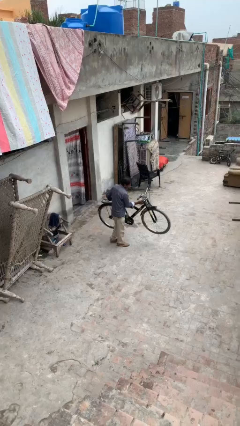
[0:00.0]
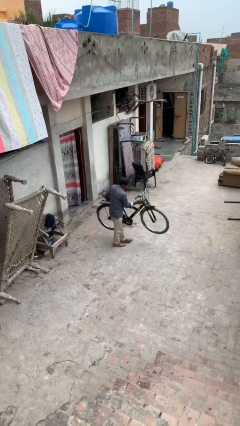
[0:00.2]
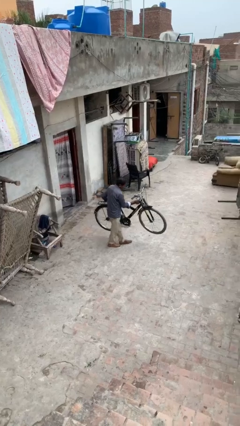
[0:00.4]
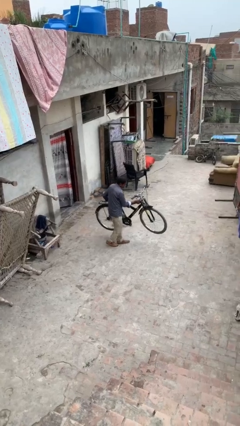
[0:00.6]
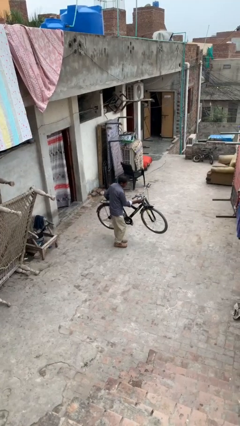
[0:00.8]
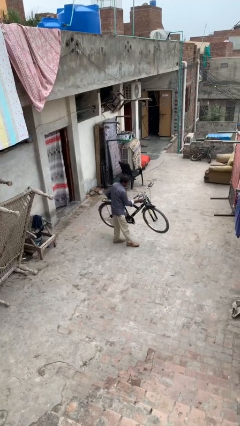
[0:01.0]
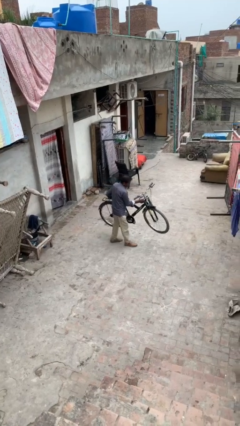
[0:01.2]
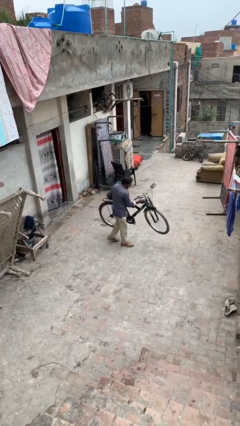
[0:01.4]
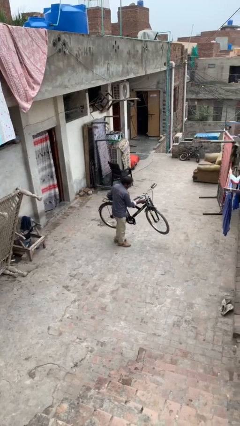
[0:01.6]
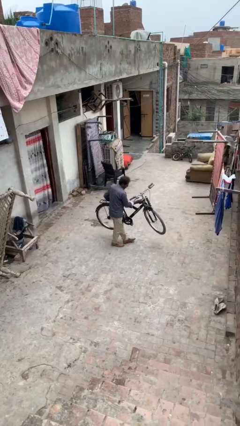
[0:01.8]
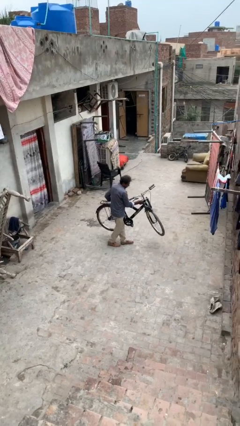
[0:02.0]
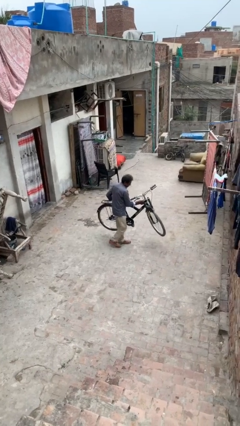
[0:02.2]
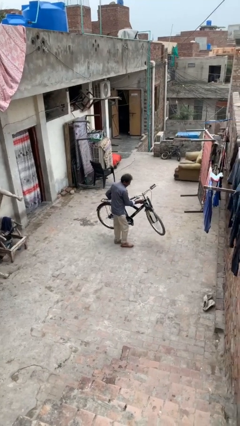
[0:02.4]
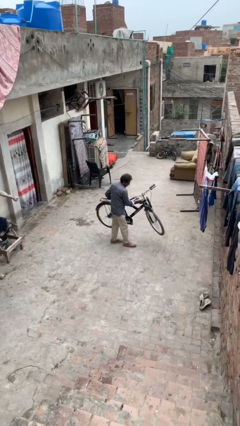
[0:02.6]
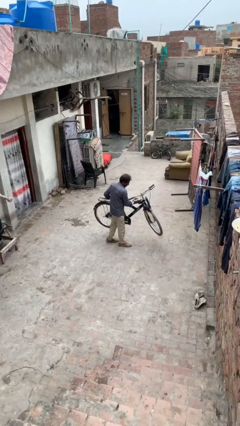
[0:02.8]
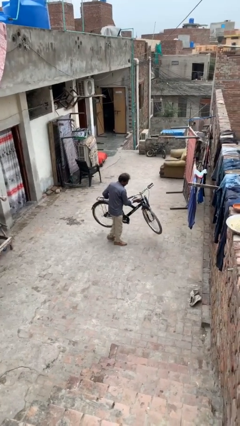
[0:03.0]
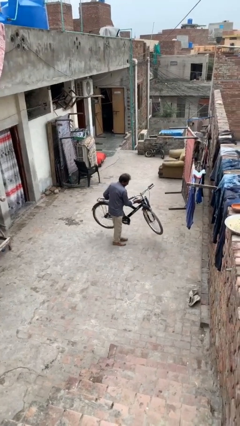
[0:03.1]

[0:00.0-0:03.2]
person carries heavy object

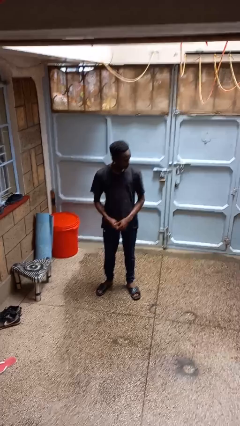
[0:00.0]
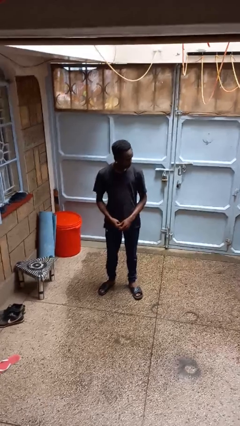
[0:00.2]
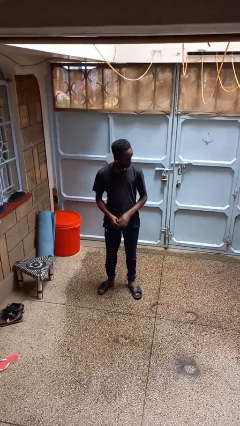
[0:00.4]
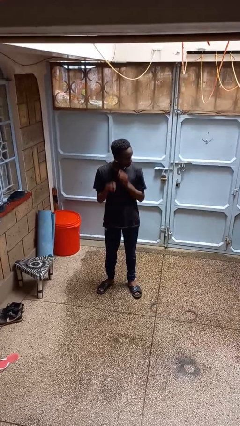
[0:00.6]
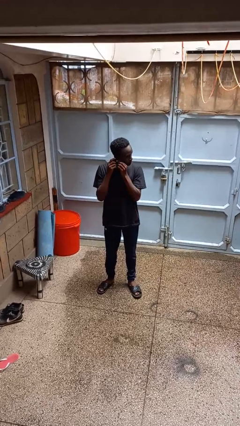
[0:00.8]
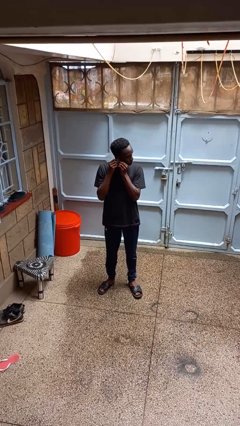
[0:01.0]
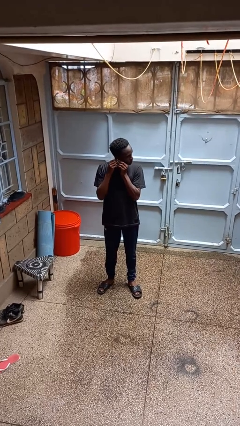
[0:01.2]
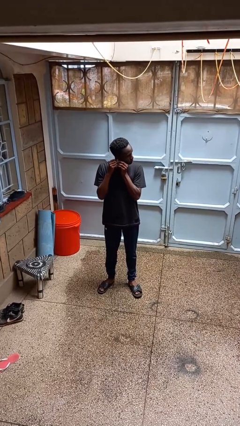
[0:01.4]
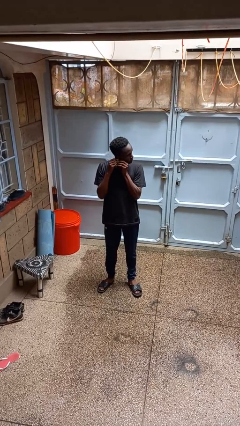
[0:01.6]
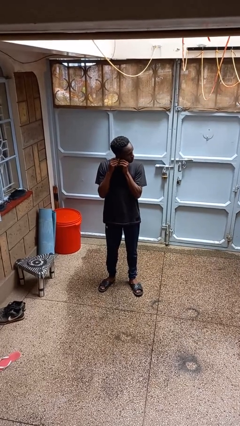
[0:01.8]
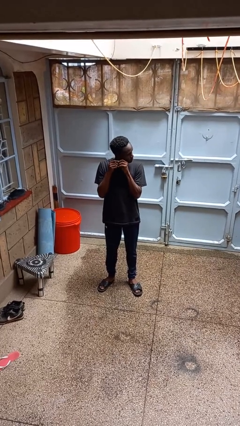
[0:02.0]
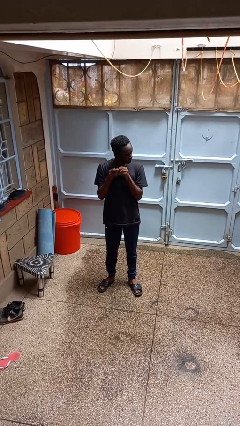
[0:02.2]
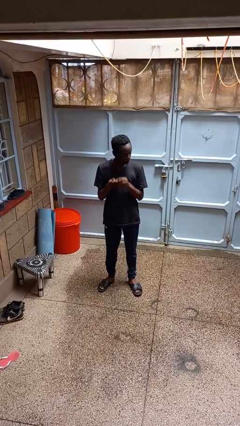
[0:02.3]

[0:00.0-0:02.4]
person takes off earrings

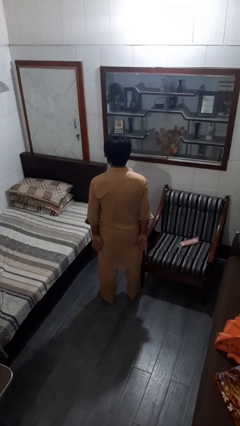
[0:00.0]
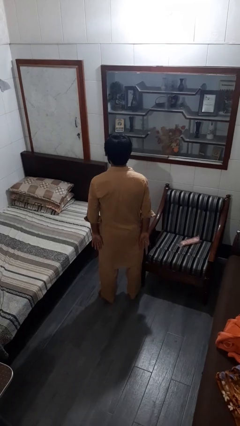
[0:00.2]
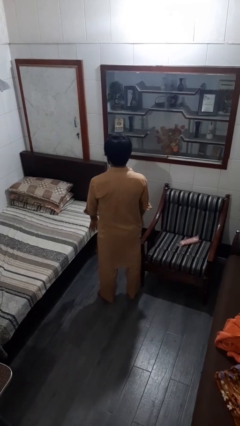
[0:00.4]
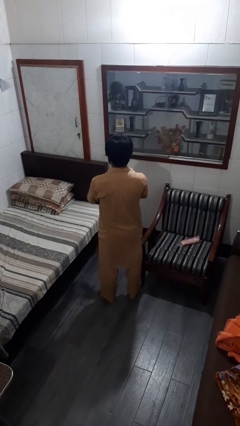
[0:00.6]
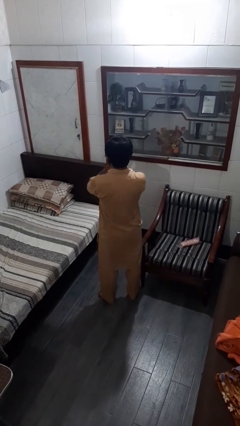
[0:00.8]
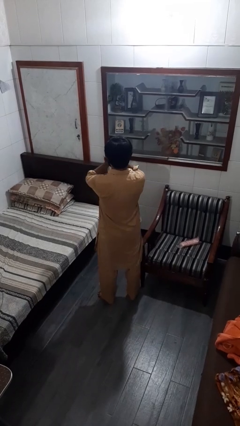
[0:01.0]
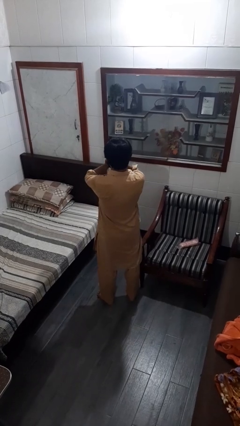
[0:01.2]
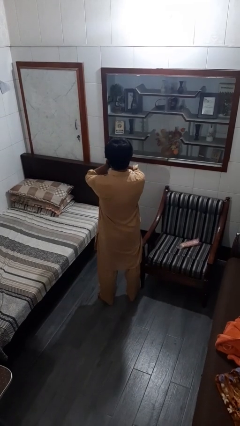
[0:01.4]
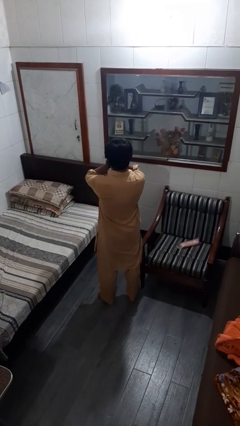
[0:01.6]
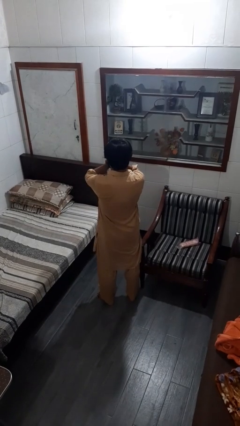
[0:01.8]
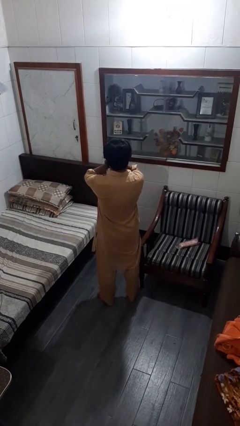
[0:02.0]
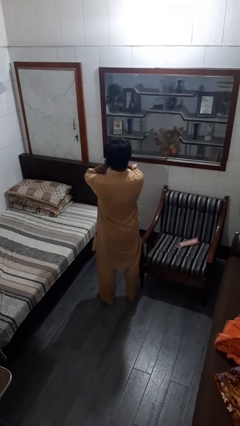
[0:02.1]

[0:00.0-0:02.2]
person covers face with hands

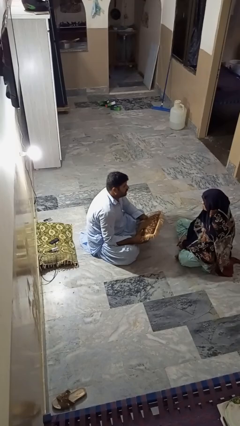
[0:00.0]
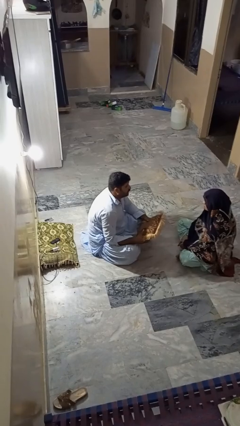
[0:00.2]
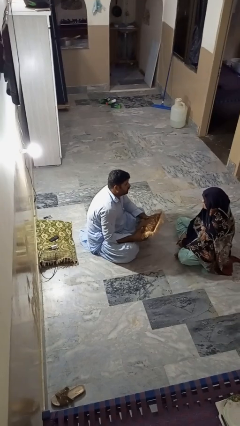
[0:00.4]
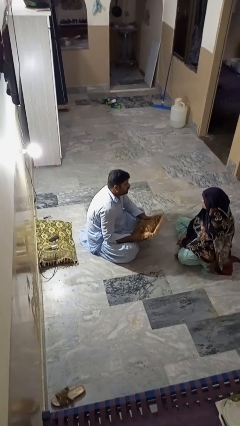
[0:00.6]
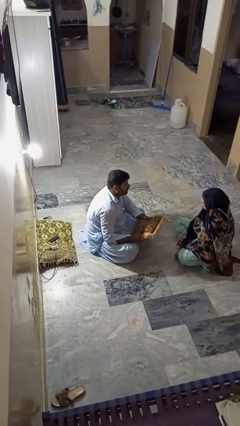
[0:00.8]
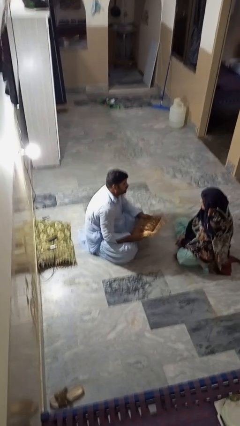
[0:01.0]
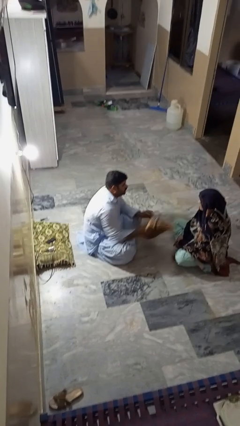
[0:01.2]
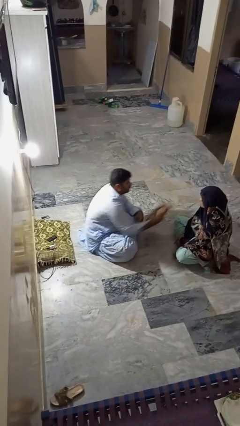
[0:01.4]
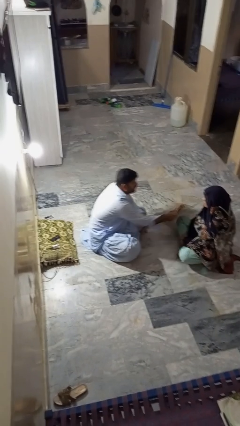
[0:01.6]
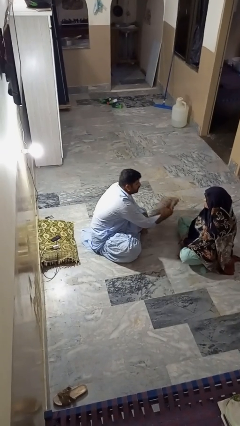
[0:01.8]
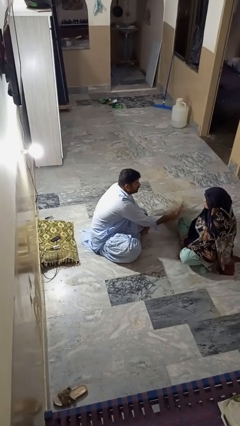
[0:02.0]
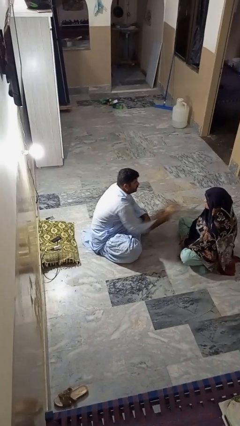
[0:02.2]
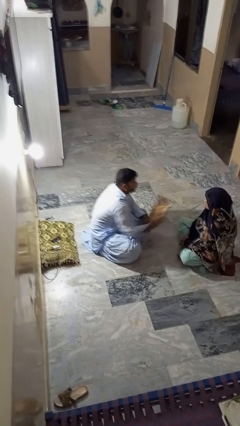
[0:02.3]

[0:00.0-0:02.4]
person hits person with pillow

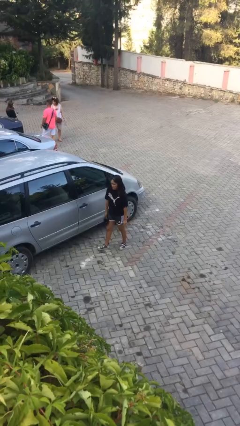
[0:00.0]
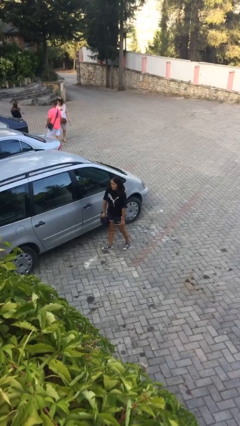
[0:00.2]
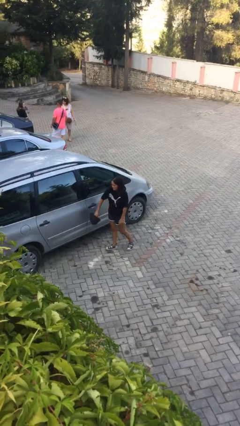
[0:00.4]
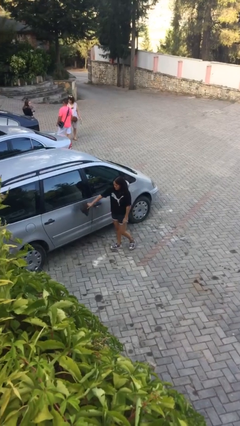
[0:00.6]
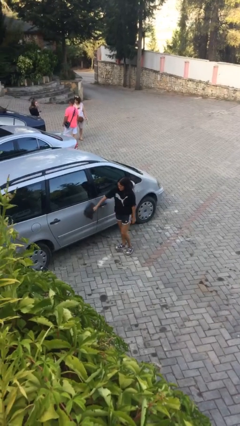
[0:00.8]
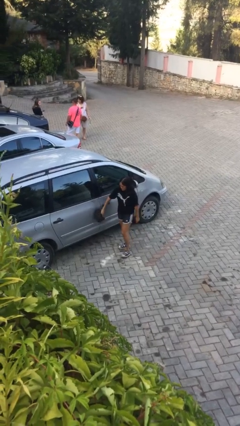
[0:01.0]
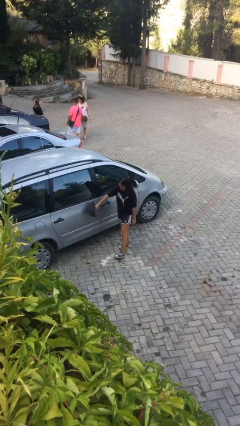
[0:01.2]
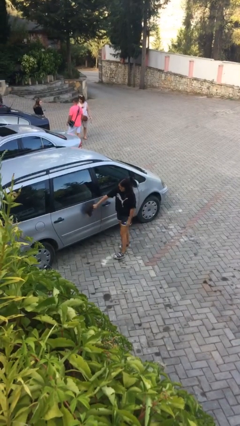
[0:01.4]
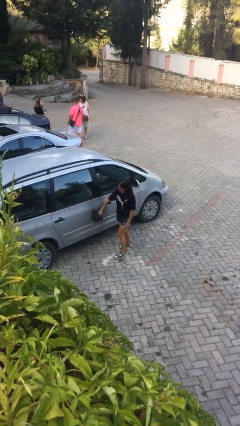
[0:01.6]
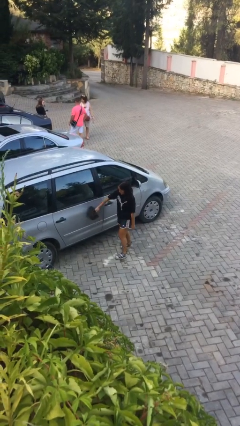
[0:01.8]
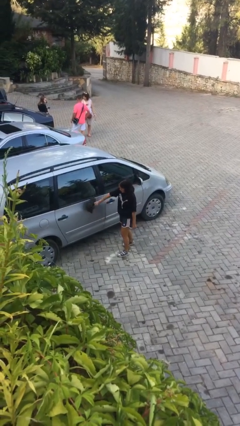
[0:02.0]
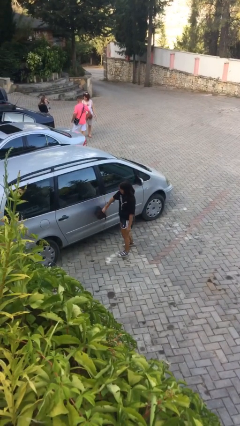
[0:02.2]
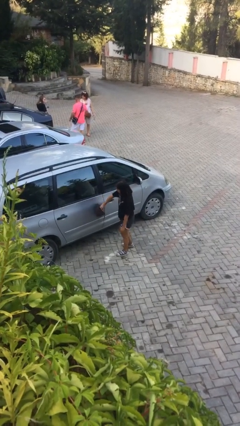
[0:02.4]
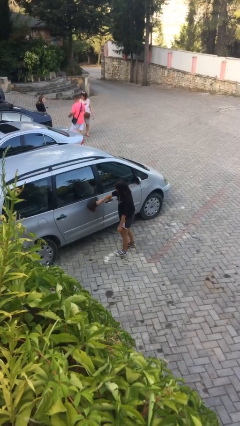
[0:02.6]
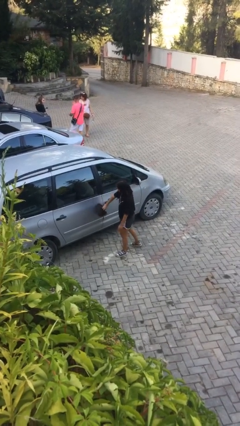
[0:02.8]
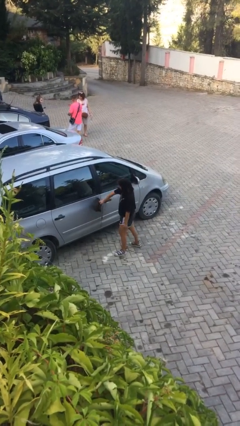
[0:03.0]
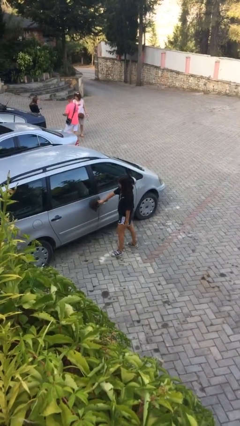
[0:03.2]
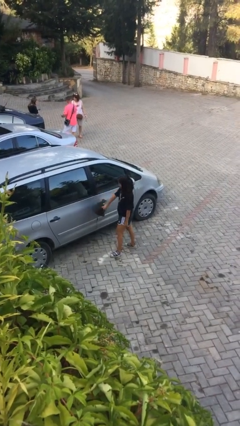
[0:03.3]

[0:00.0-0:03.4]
person polishes car with rag

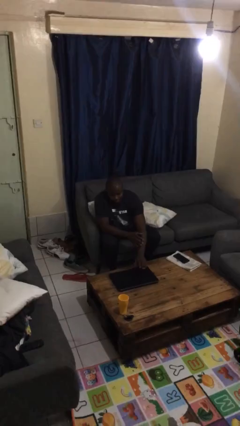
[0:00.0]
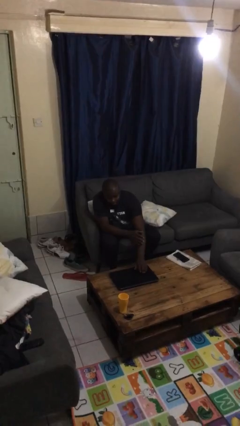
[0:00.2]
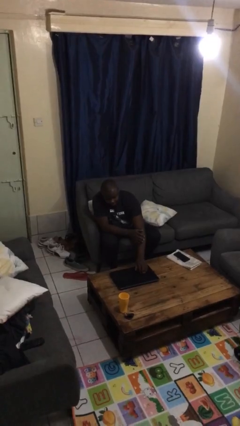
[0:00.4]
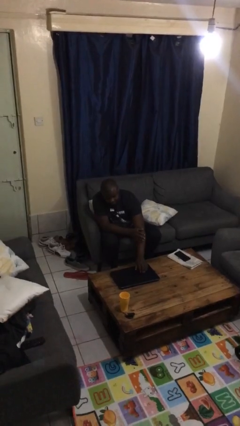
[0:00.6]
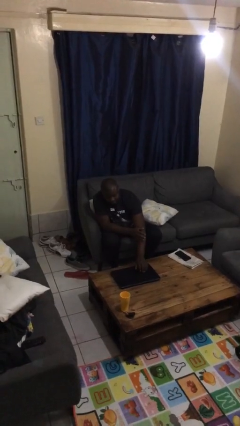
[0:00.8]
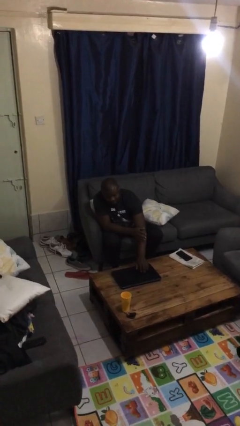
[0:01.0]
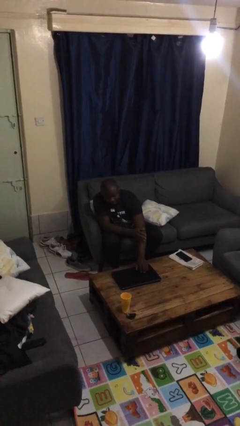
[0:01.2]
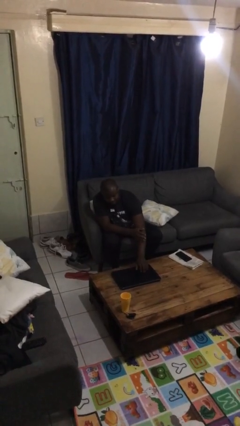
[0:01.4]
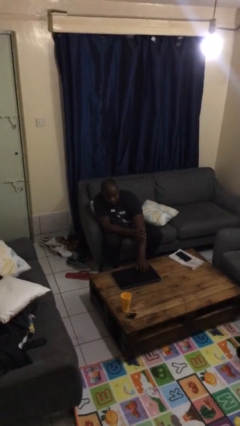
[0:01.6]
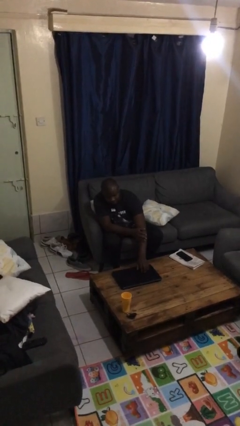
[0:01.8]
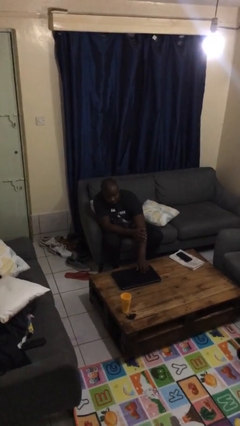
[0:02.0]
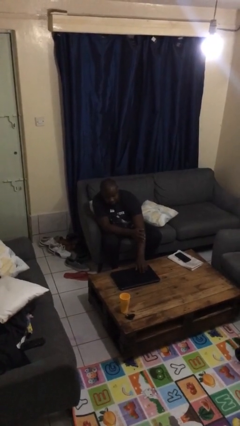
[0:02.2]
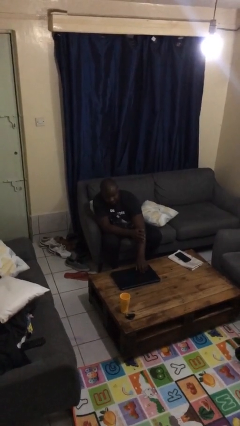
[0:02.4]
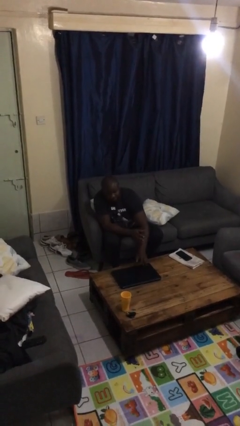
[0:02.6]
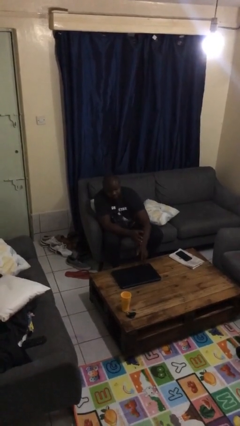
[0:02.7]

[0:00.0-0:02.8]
person taps object with finger

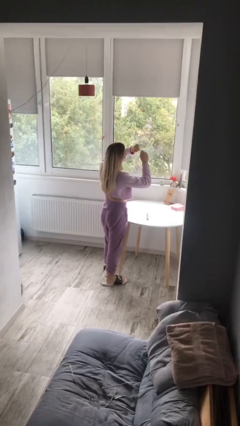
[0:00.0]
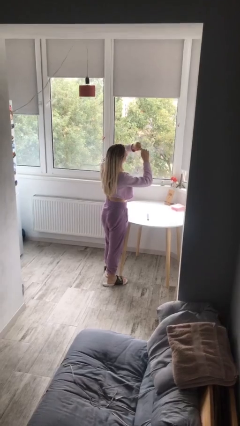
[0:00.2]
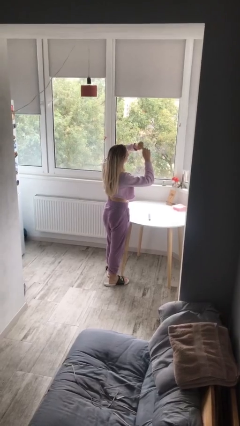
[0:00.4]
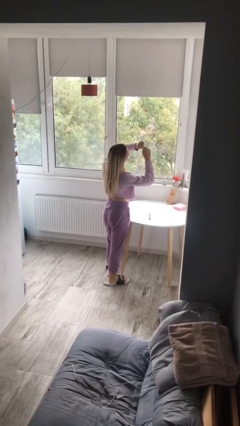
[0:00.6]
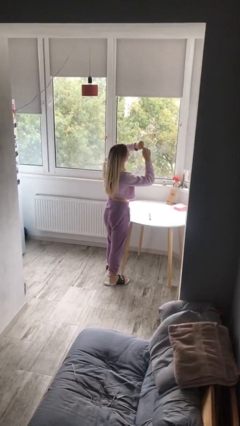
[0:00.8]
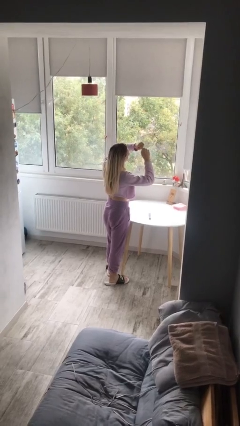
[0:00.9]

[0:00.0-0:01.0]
person clips fingernails
